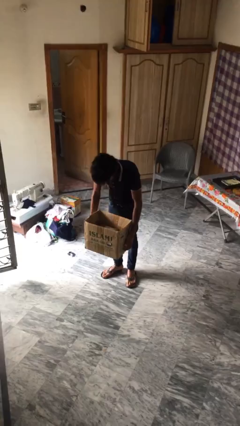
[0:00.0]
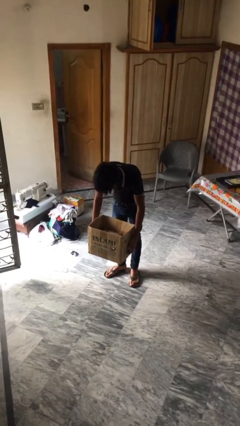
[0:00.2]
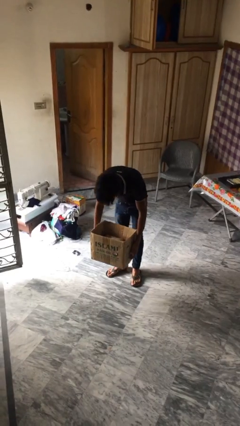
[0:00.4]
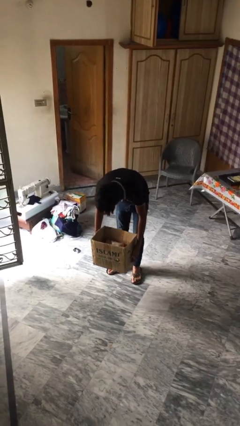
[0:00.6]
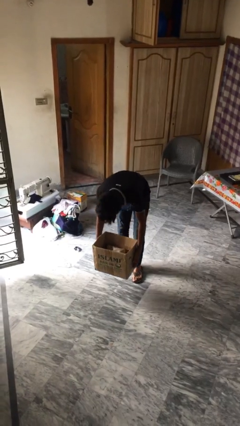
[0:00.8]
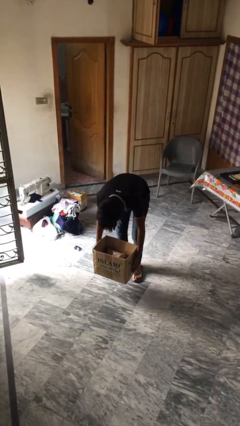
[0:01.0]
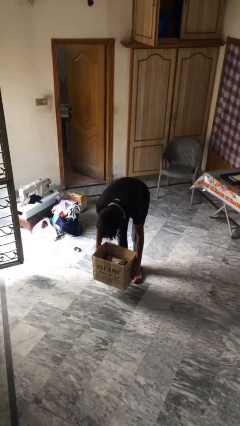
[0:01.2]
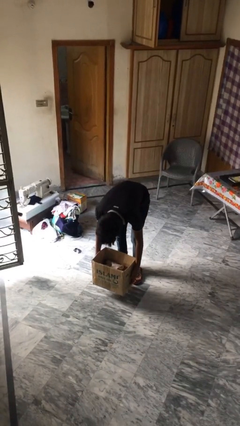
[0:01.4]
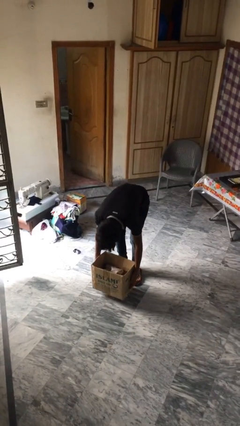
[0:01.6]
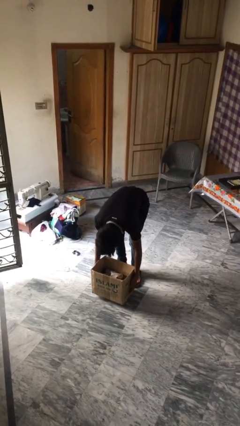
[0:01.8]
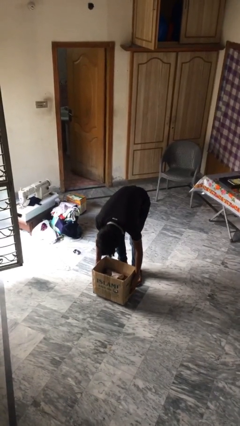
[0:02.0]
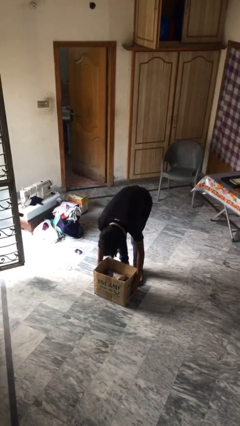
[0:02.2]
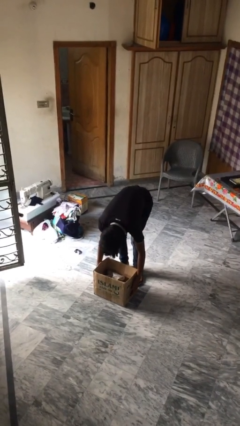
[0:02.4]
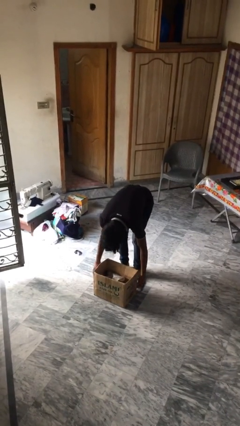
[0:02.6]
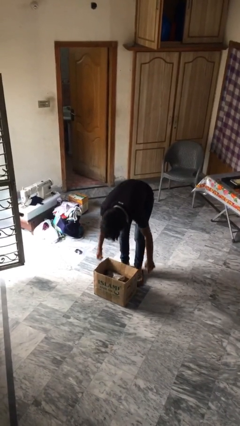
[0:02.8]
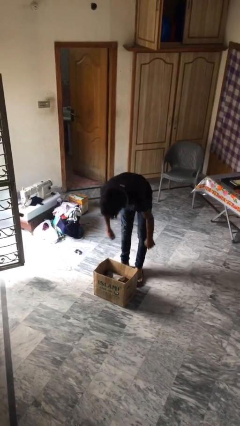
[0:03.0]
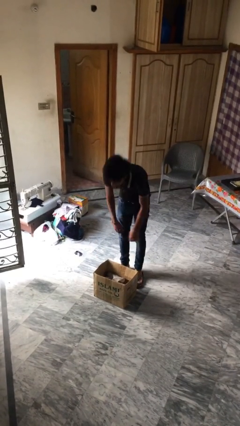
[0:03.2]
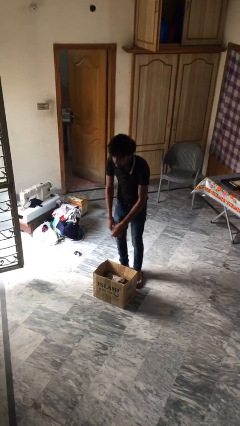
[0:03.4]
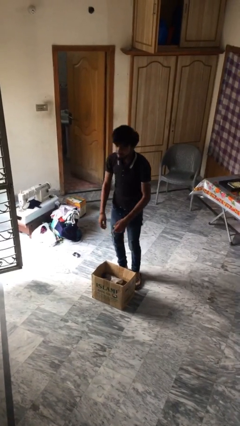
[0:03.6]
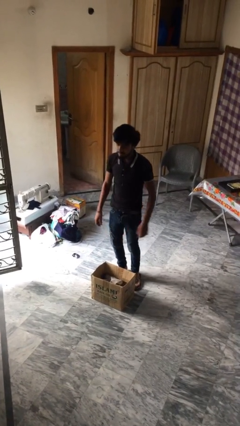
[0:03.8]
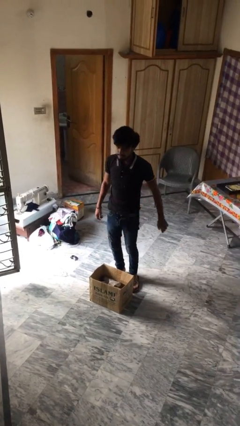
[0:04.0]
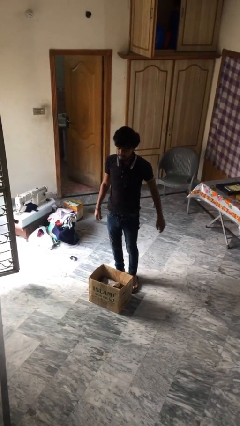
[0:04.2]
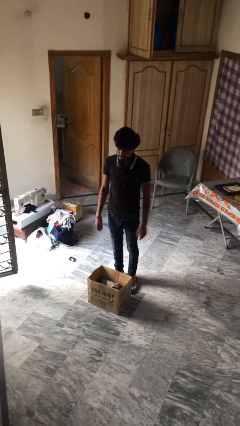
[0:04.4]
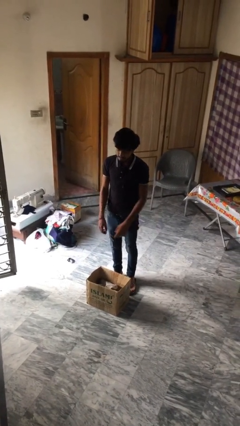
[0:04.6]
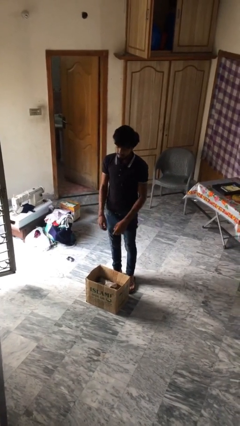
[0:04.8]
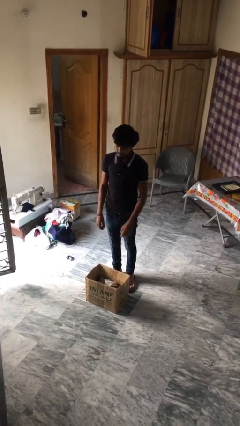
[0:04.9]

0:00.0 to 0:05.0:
person puts down object on floor

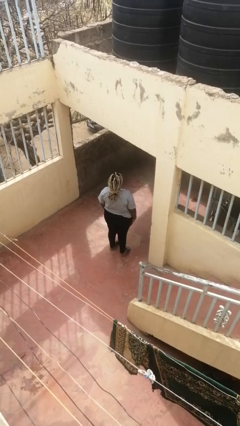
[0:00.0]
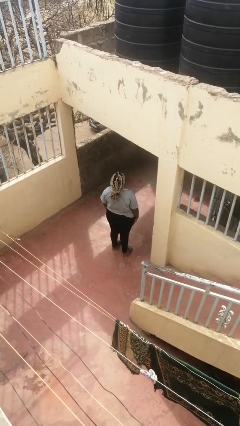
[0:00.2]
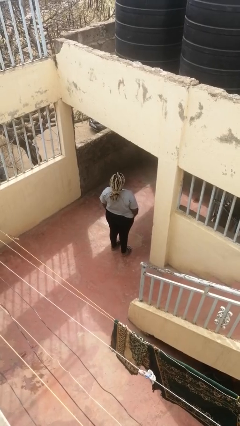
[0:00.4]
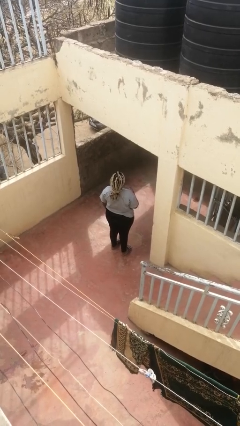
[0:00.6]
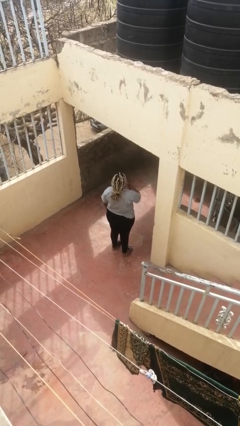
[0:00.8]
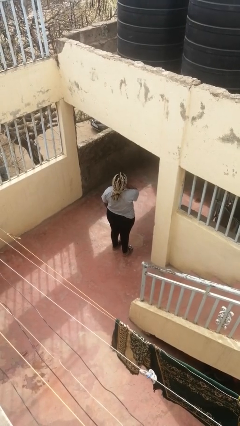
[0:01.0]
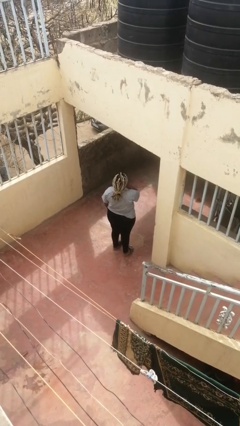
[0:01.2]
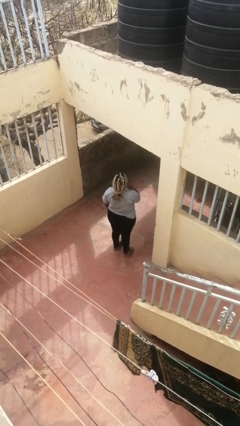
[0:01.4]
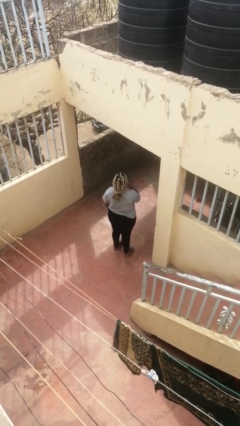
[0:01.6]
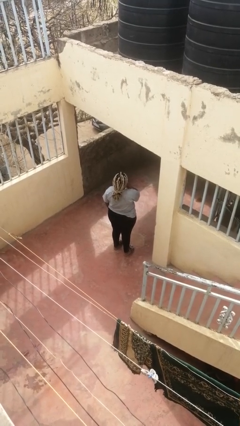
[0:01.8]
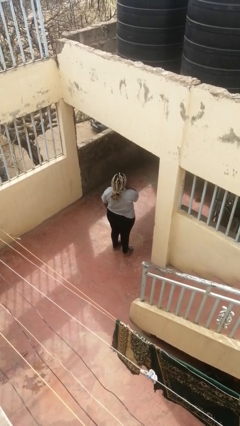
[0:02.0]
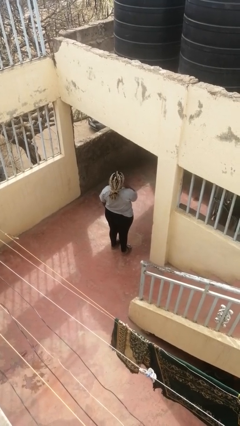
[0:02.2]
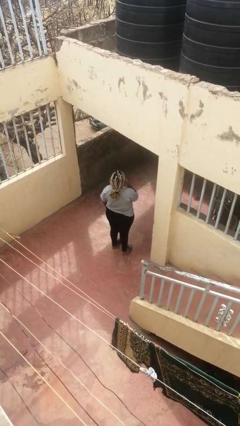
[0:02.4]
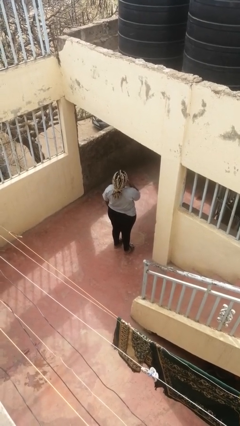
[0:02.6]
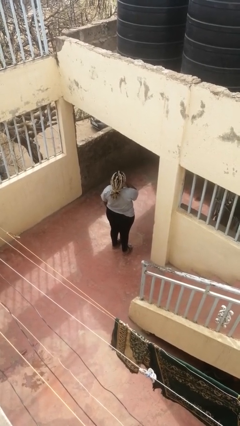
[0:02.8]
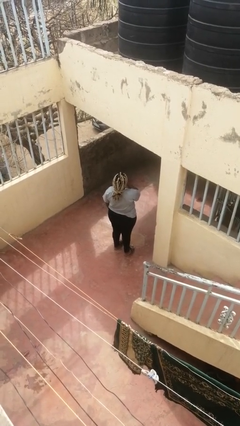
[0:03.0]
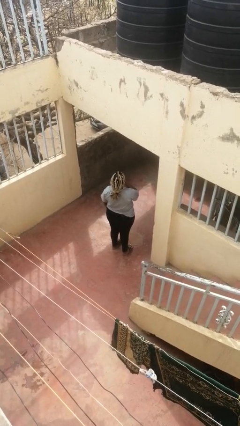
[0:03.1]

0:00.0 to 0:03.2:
person strokes chin

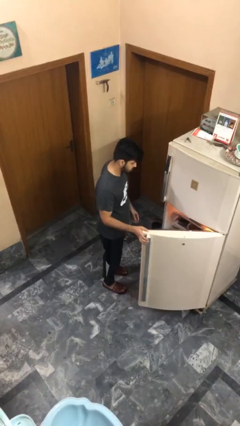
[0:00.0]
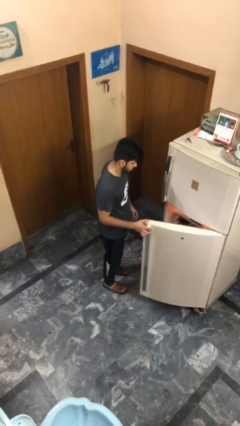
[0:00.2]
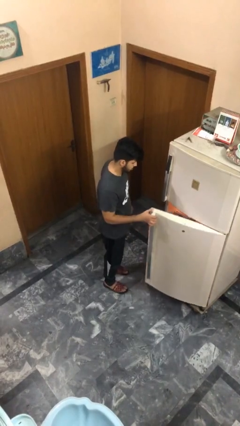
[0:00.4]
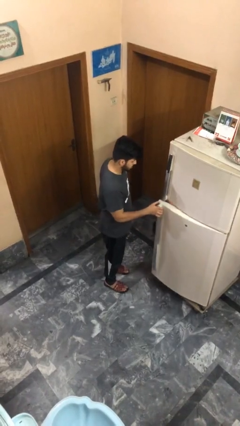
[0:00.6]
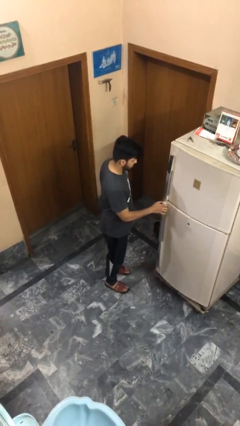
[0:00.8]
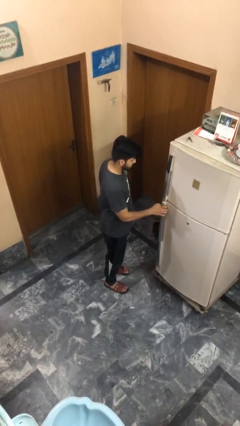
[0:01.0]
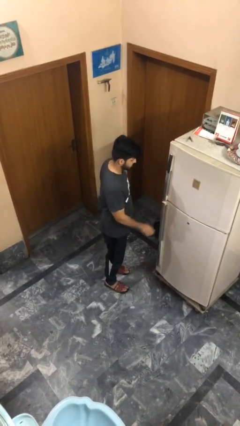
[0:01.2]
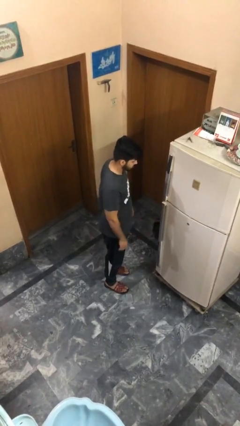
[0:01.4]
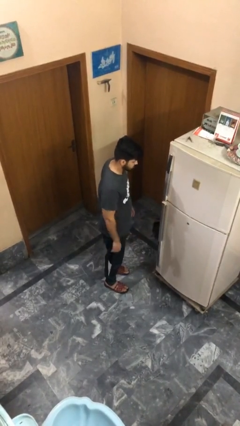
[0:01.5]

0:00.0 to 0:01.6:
person closes refrigerator

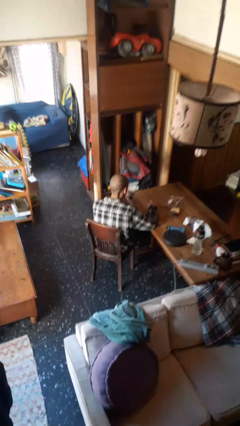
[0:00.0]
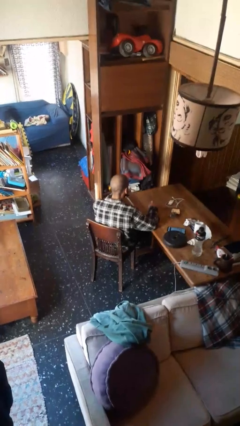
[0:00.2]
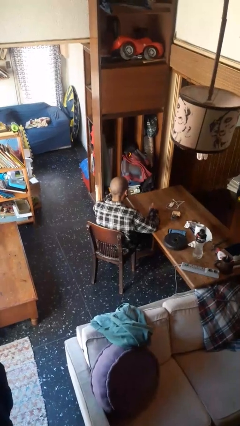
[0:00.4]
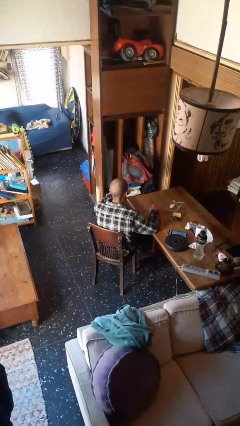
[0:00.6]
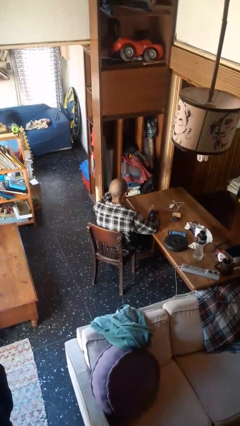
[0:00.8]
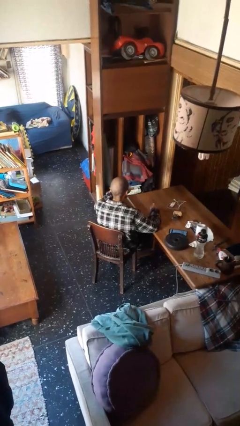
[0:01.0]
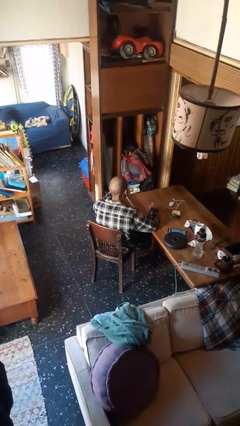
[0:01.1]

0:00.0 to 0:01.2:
person drinks from mug

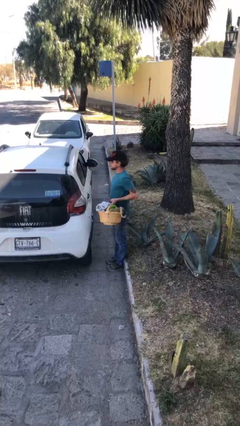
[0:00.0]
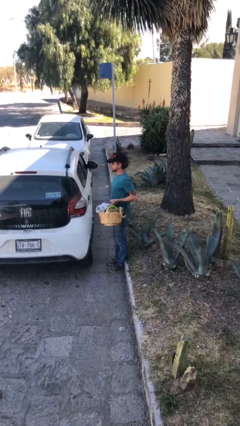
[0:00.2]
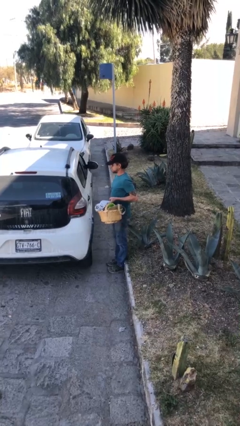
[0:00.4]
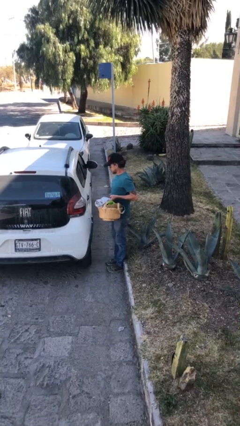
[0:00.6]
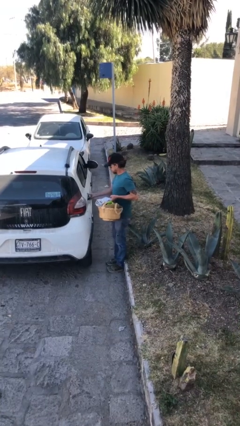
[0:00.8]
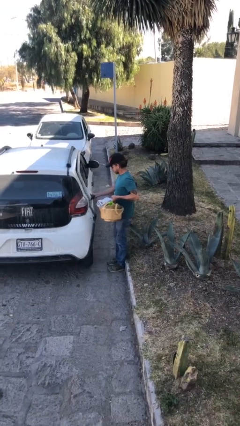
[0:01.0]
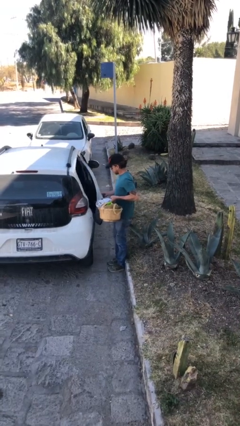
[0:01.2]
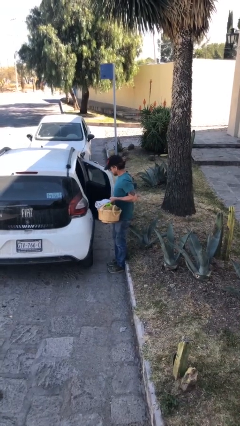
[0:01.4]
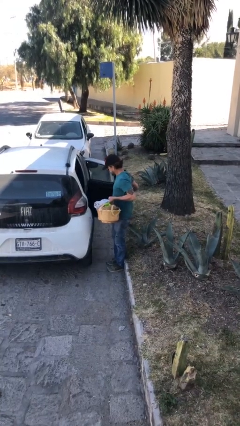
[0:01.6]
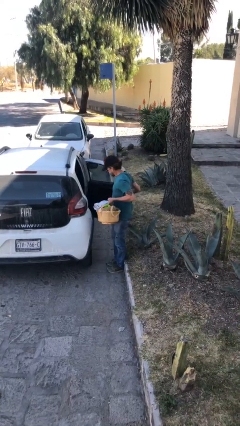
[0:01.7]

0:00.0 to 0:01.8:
person opens car door

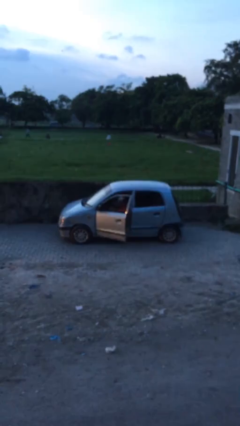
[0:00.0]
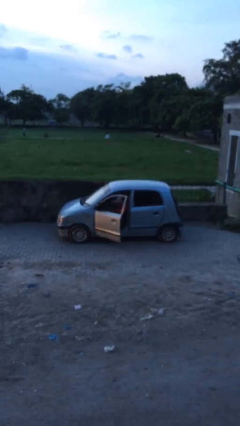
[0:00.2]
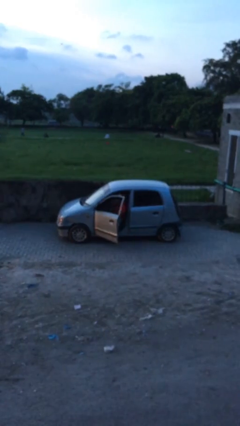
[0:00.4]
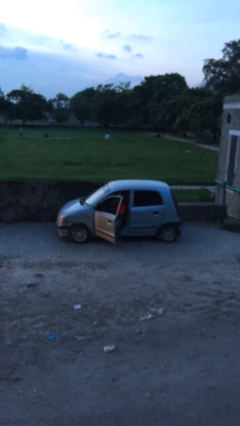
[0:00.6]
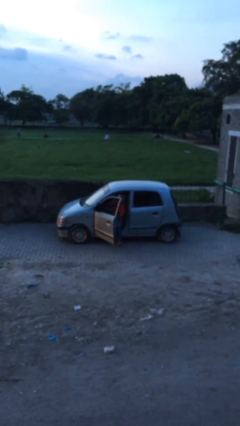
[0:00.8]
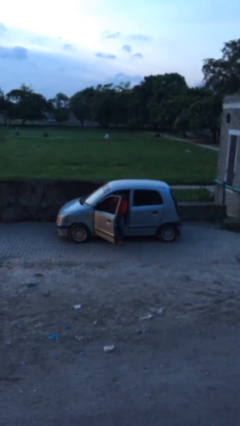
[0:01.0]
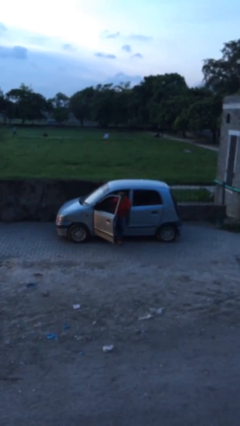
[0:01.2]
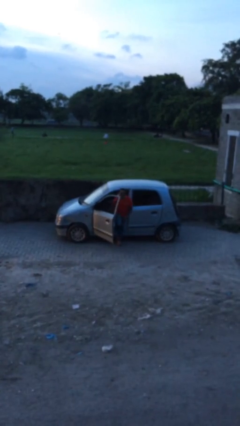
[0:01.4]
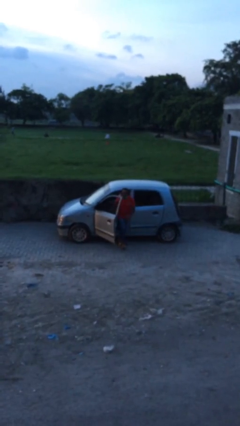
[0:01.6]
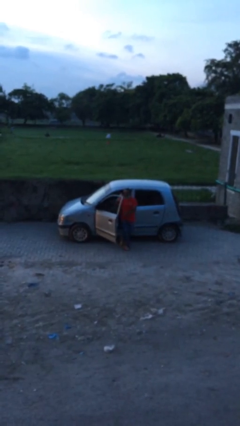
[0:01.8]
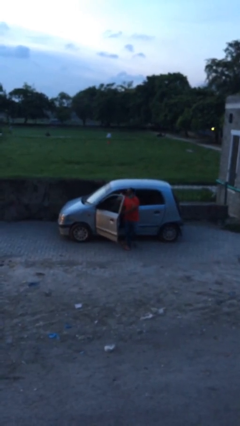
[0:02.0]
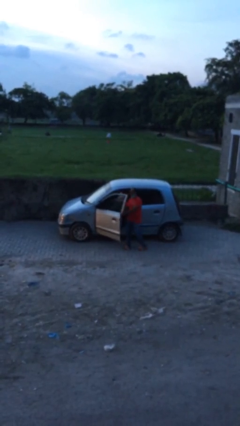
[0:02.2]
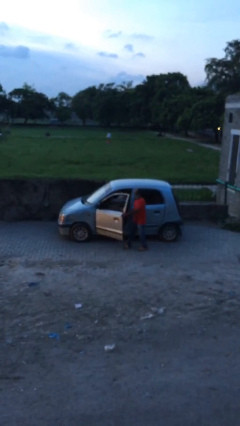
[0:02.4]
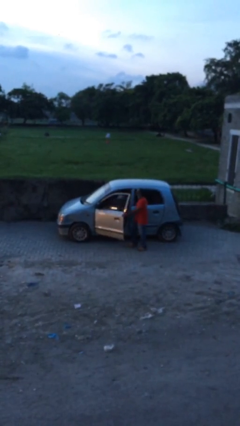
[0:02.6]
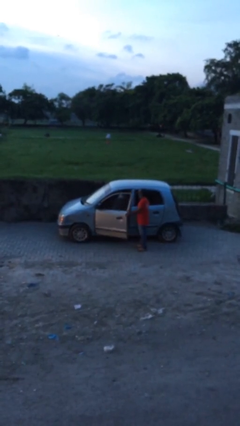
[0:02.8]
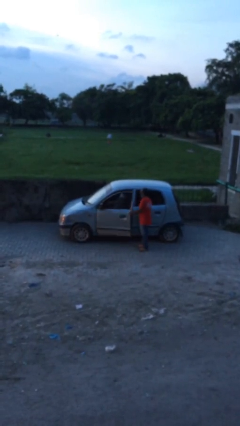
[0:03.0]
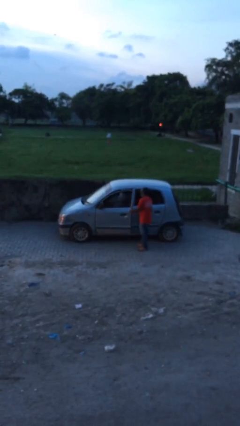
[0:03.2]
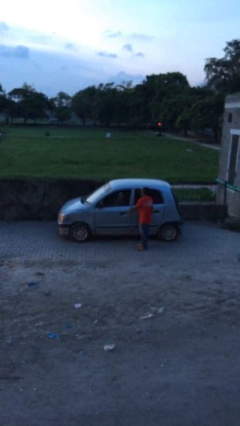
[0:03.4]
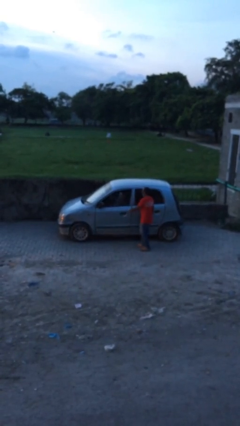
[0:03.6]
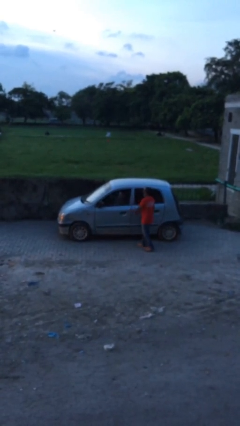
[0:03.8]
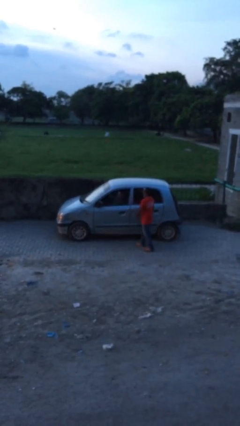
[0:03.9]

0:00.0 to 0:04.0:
car drops off person

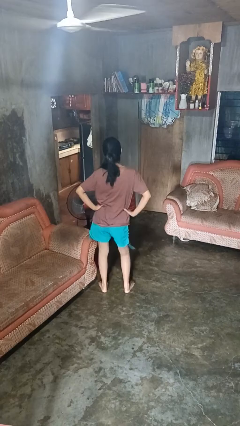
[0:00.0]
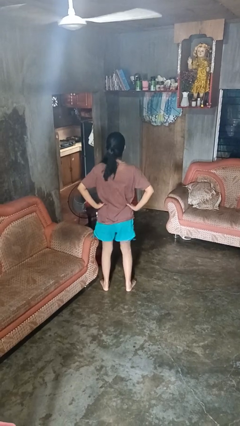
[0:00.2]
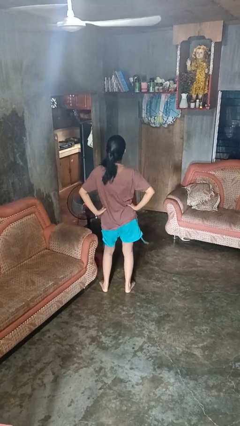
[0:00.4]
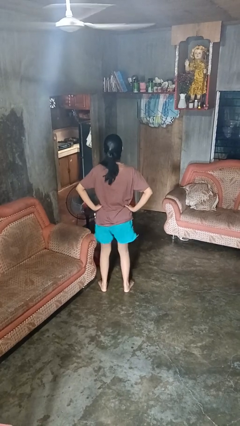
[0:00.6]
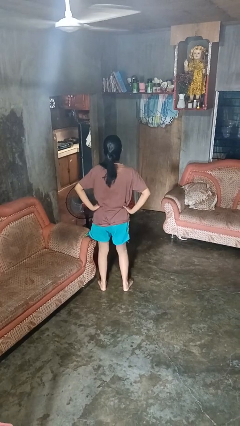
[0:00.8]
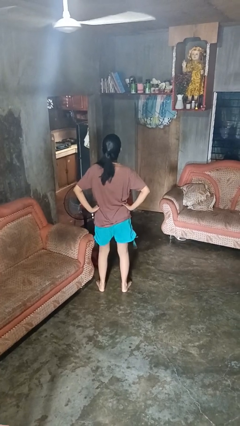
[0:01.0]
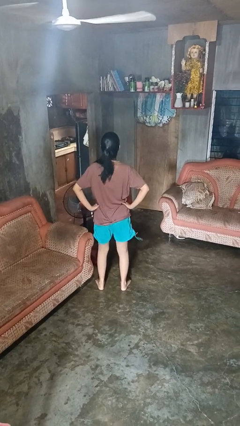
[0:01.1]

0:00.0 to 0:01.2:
person wiggles hips
